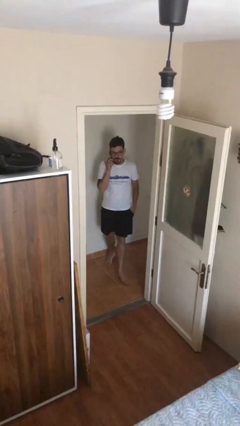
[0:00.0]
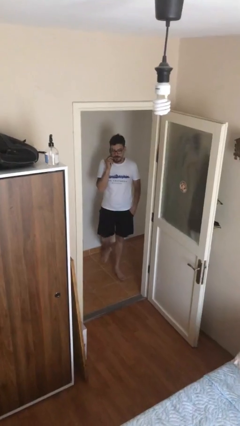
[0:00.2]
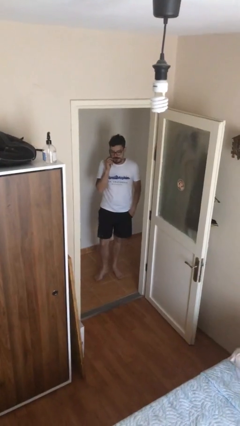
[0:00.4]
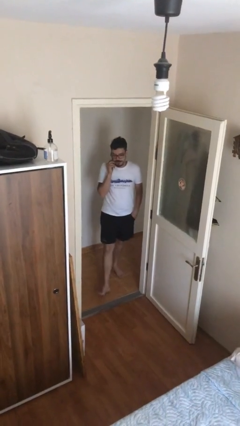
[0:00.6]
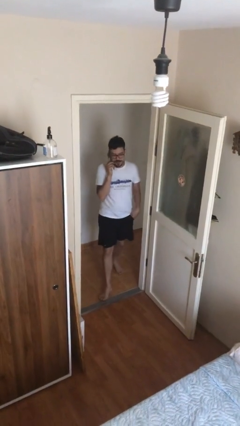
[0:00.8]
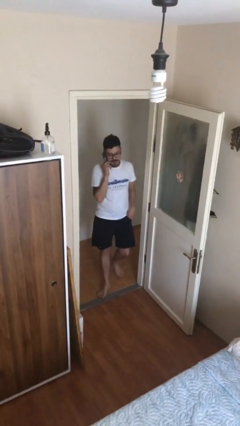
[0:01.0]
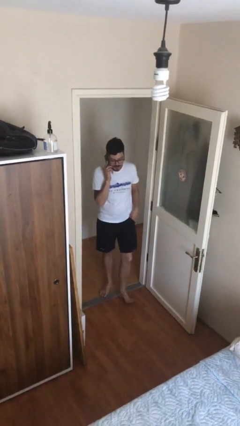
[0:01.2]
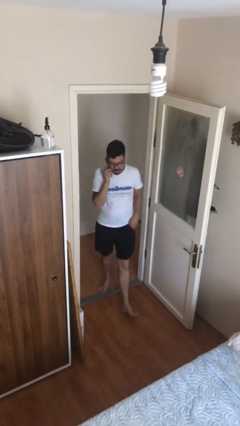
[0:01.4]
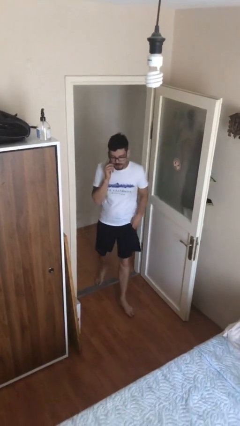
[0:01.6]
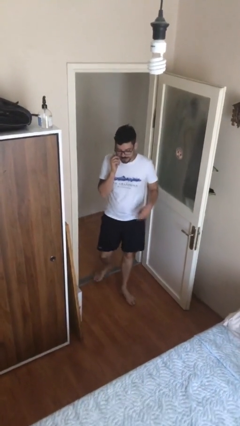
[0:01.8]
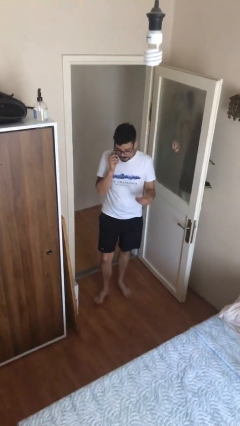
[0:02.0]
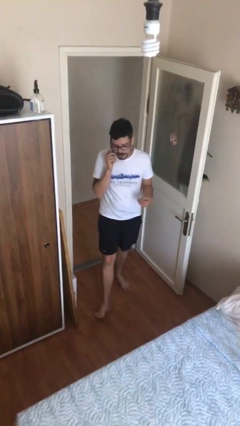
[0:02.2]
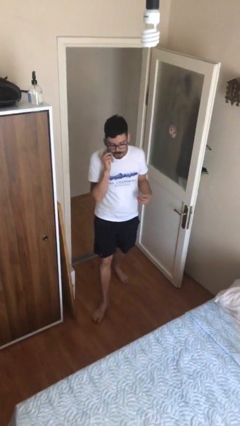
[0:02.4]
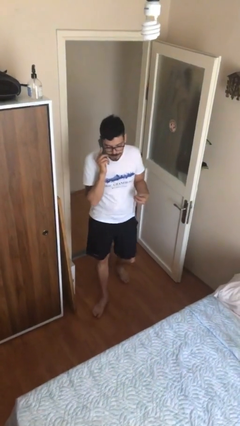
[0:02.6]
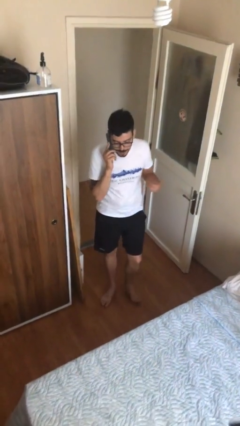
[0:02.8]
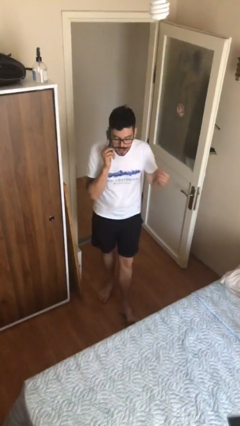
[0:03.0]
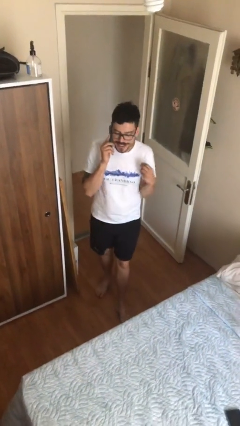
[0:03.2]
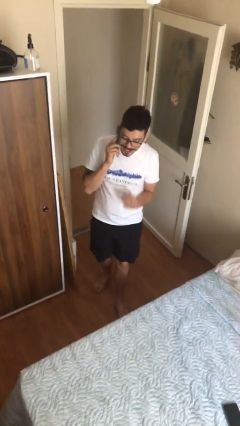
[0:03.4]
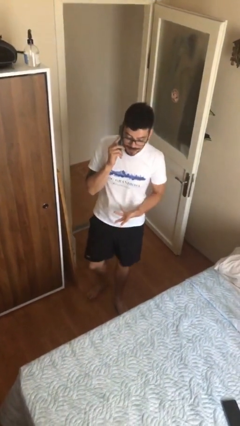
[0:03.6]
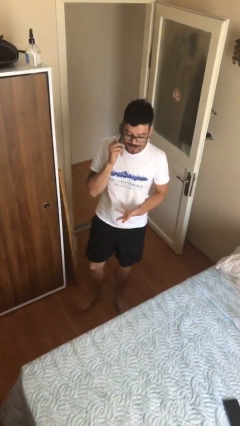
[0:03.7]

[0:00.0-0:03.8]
person enters scene through structure

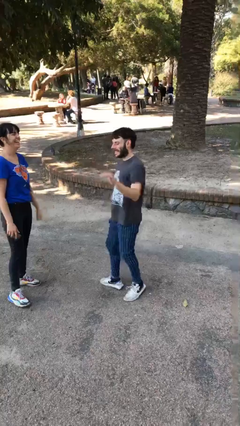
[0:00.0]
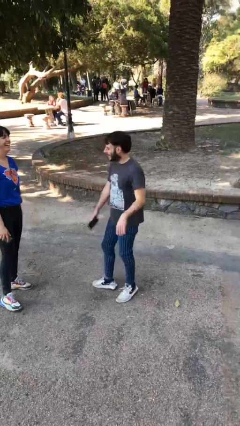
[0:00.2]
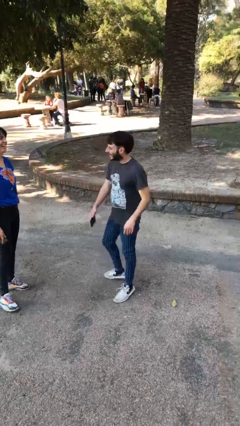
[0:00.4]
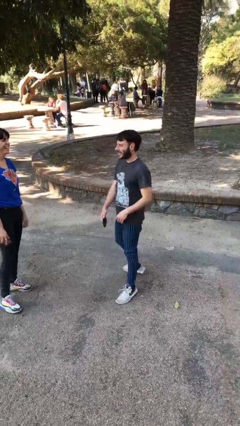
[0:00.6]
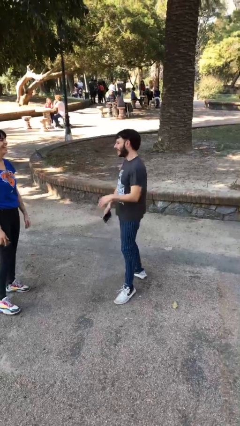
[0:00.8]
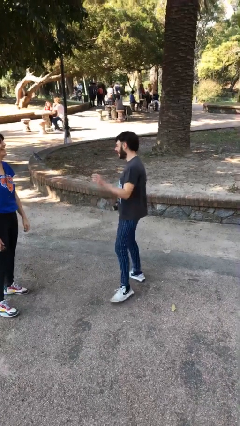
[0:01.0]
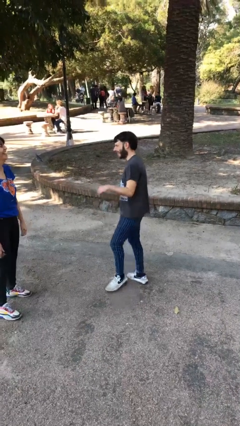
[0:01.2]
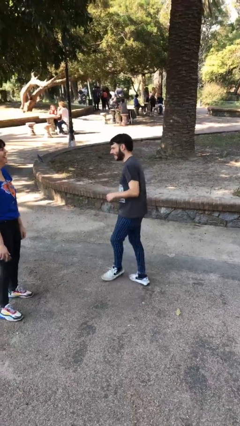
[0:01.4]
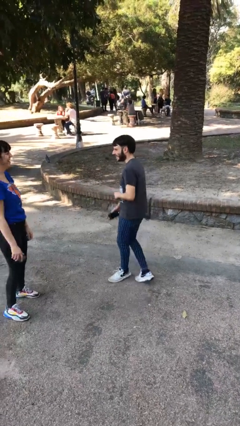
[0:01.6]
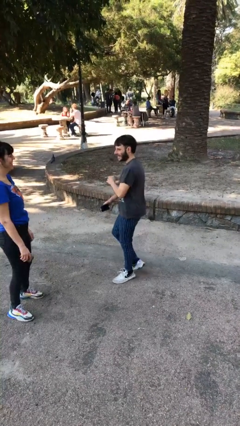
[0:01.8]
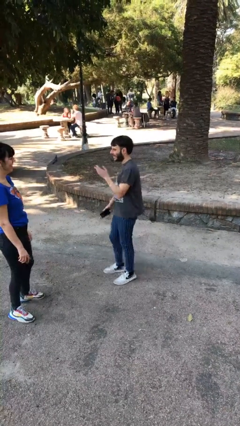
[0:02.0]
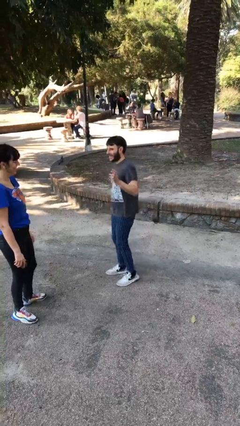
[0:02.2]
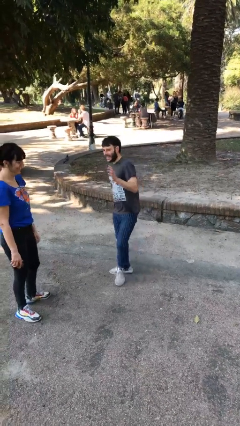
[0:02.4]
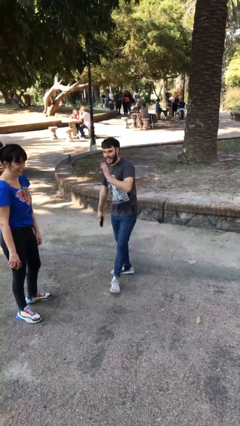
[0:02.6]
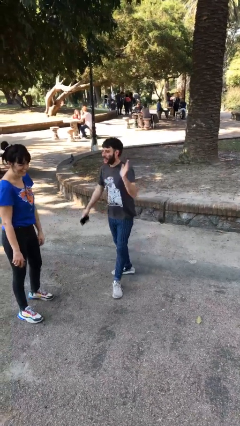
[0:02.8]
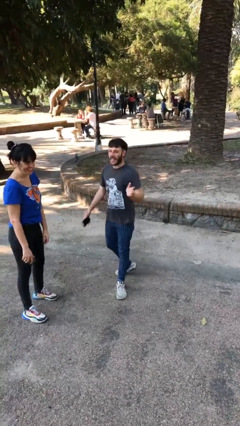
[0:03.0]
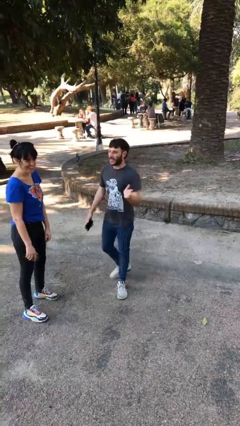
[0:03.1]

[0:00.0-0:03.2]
person laughs with person

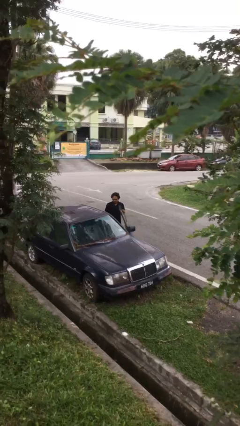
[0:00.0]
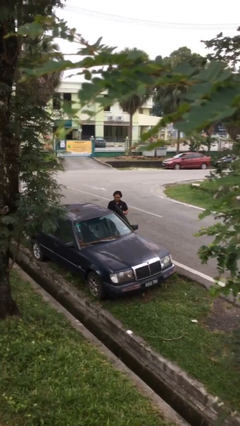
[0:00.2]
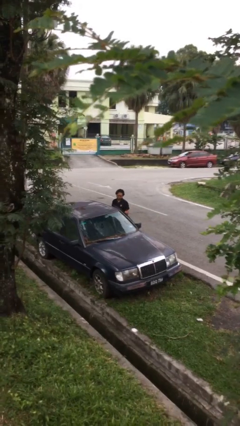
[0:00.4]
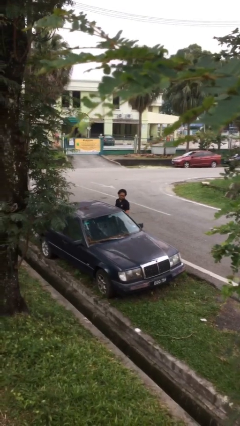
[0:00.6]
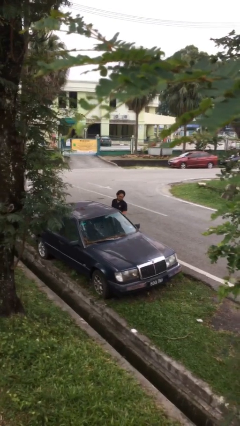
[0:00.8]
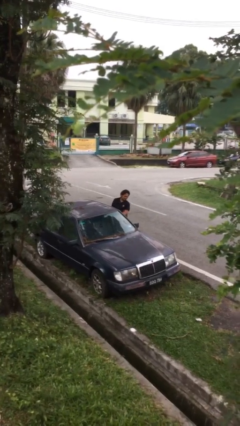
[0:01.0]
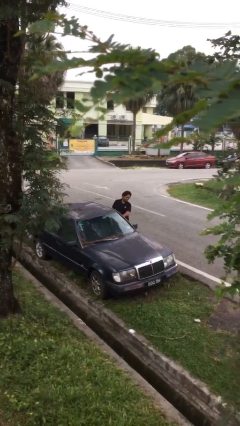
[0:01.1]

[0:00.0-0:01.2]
person closes car door

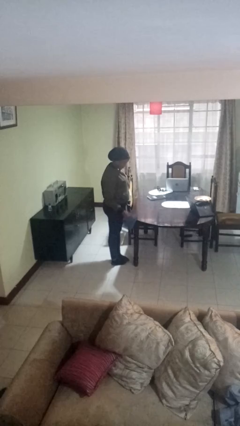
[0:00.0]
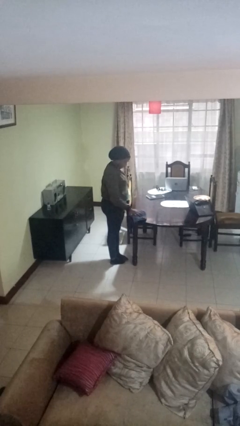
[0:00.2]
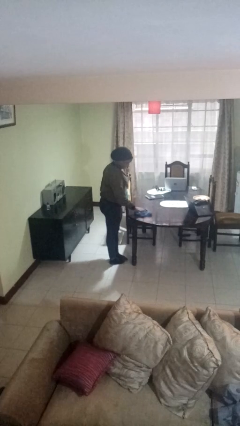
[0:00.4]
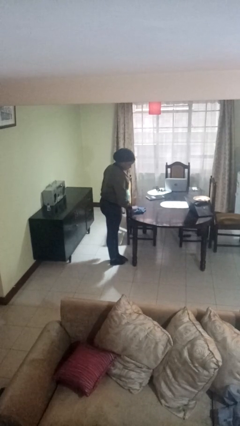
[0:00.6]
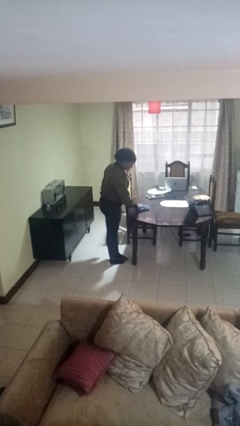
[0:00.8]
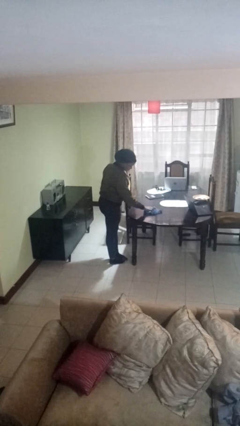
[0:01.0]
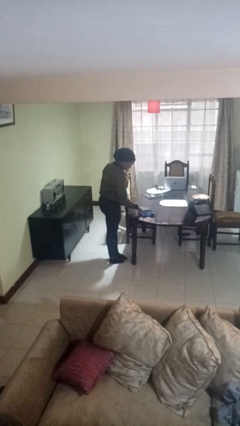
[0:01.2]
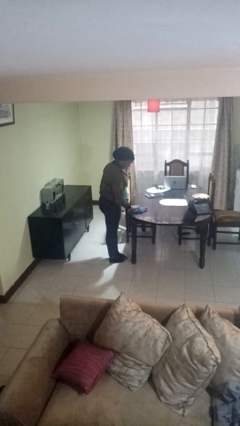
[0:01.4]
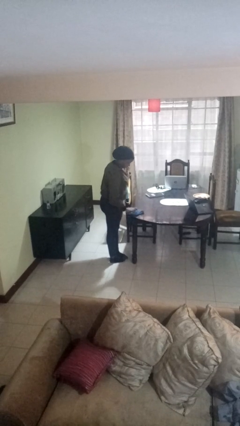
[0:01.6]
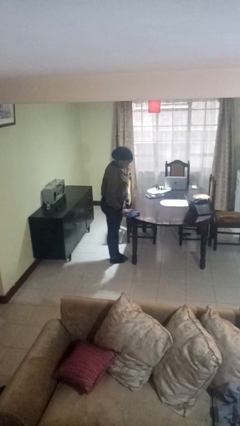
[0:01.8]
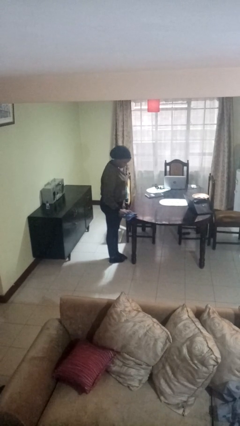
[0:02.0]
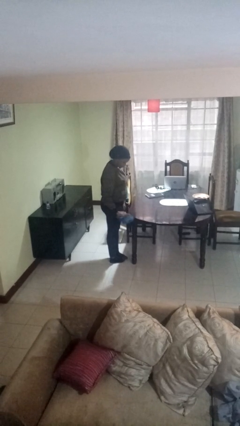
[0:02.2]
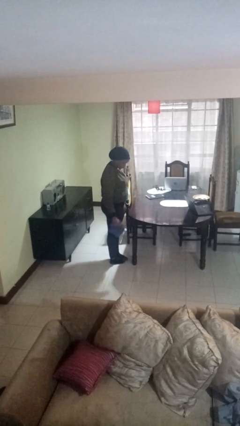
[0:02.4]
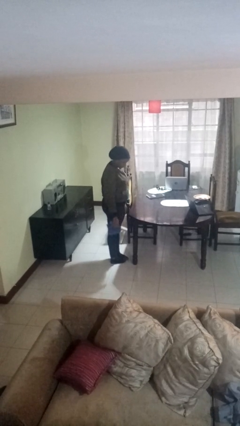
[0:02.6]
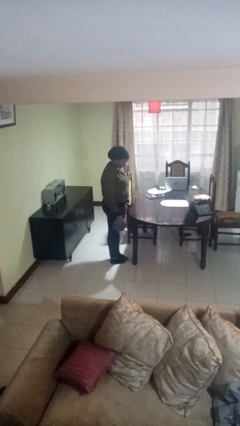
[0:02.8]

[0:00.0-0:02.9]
person cleans table with rag

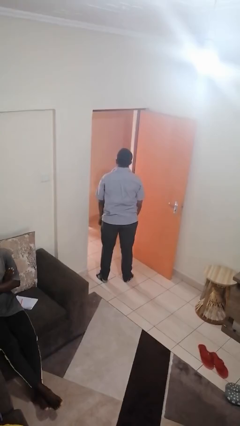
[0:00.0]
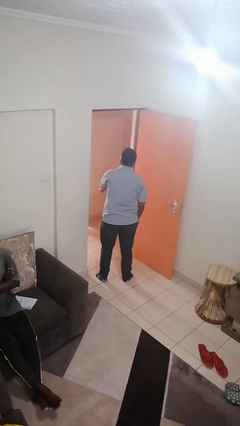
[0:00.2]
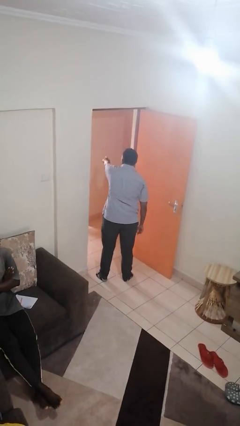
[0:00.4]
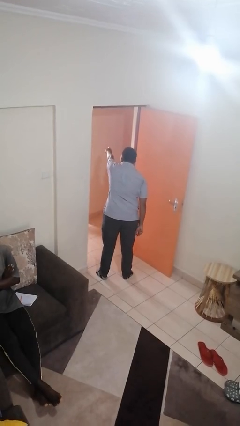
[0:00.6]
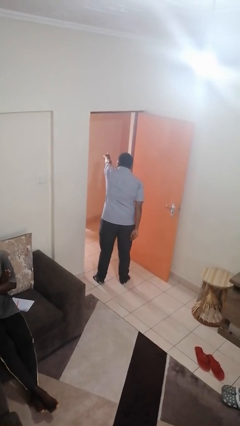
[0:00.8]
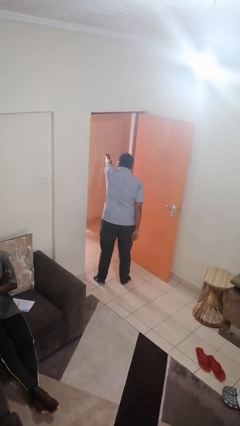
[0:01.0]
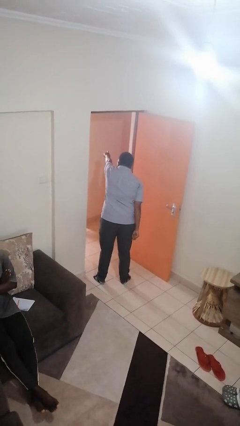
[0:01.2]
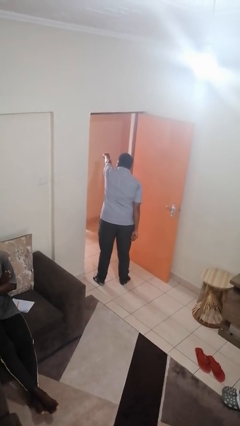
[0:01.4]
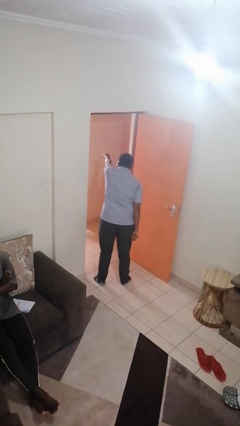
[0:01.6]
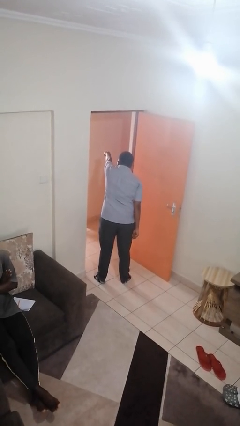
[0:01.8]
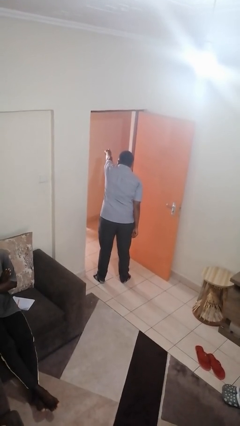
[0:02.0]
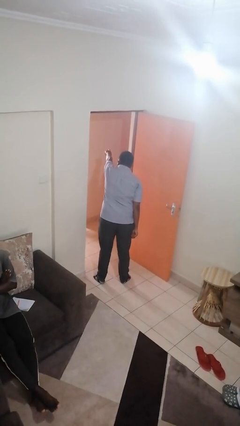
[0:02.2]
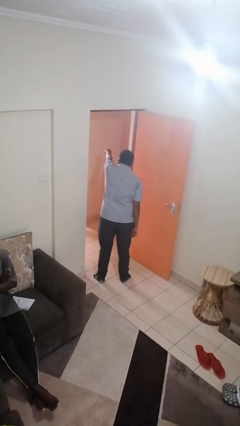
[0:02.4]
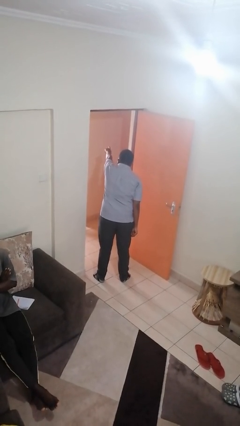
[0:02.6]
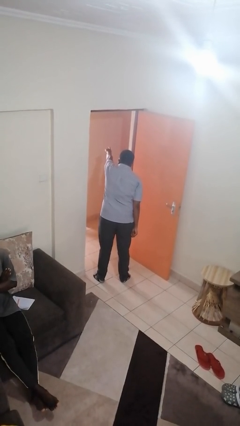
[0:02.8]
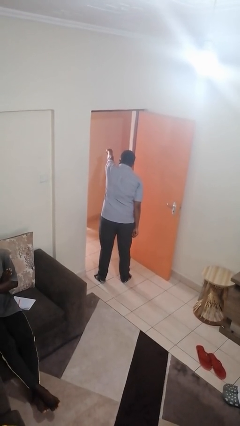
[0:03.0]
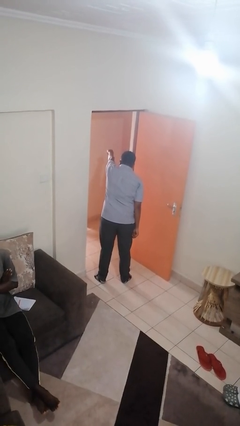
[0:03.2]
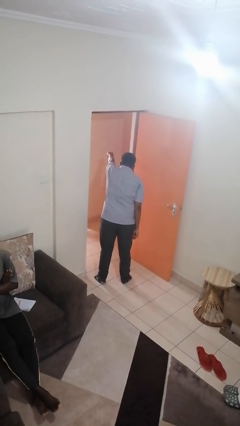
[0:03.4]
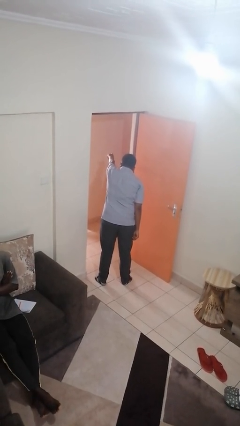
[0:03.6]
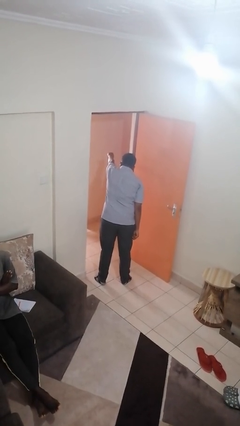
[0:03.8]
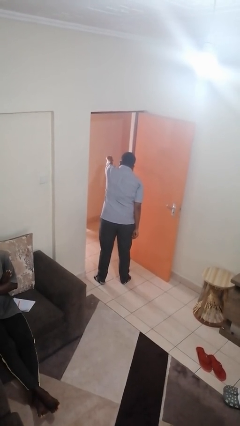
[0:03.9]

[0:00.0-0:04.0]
person points at person

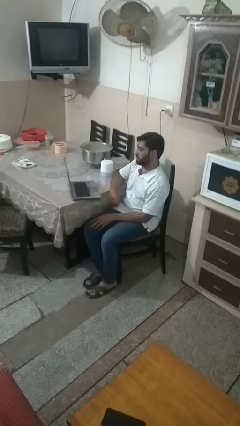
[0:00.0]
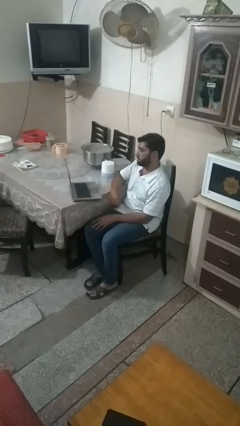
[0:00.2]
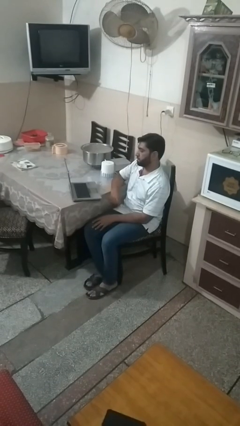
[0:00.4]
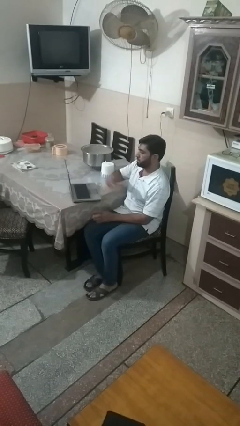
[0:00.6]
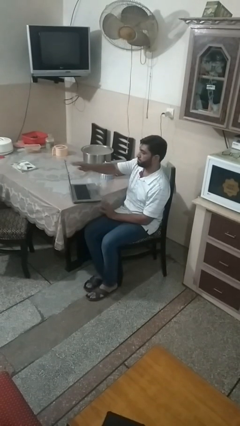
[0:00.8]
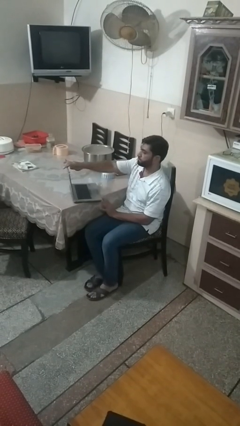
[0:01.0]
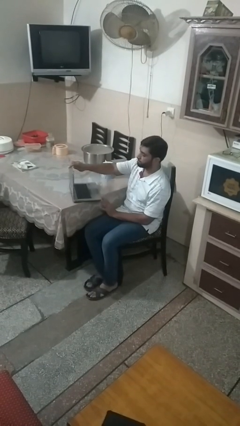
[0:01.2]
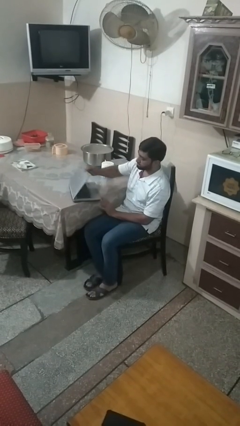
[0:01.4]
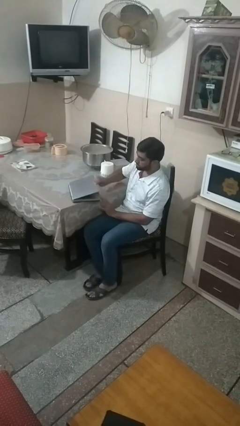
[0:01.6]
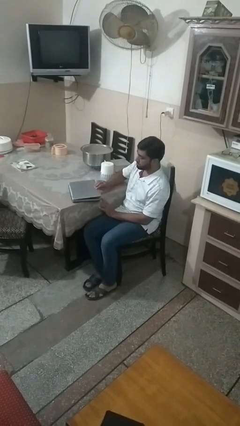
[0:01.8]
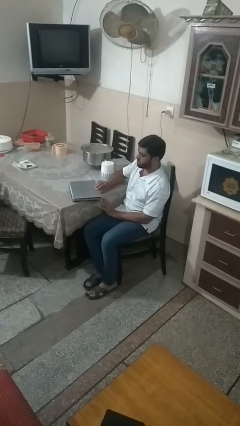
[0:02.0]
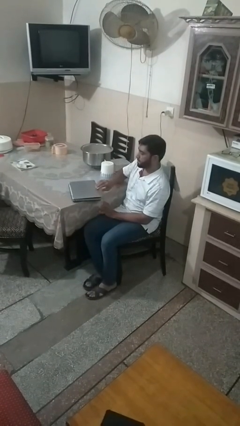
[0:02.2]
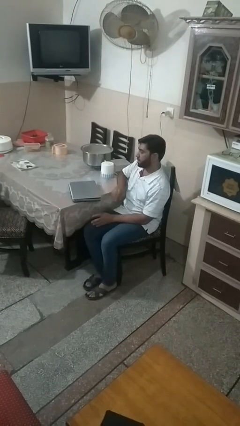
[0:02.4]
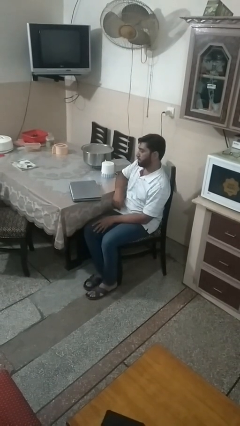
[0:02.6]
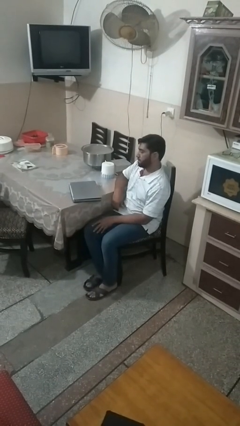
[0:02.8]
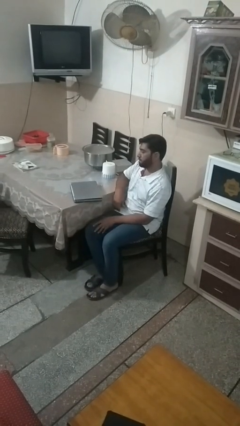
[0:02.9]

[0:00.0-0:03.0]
person closes laptop
